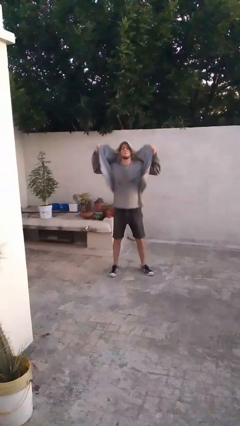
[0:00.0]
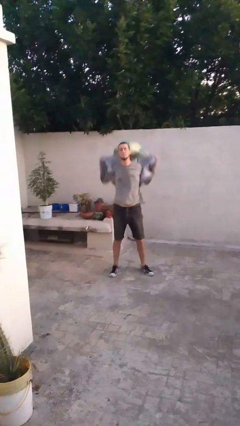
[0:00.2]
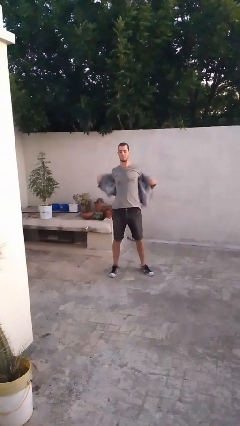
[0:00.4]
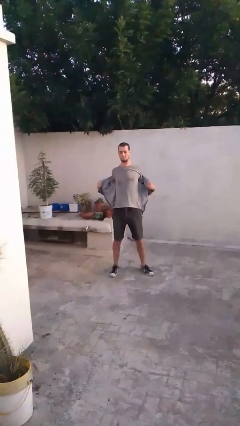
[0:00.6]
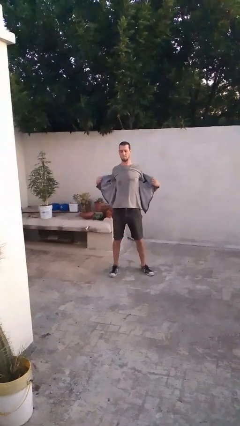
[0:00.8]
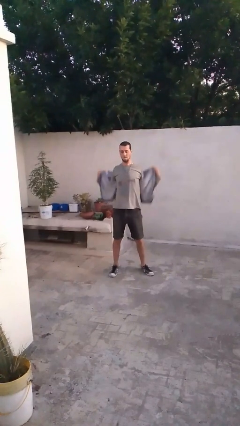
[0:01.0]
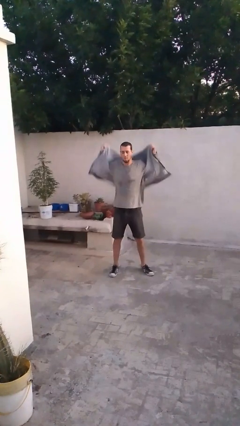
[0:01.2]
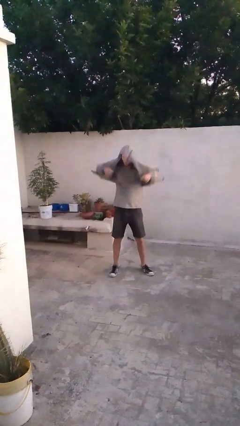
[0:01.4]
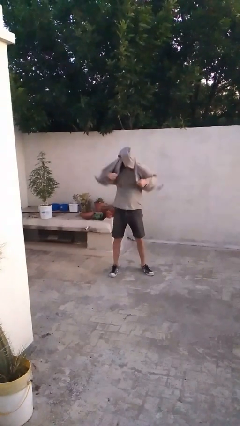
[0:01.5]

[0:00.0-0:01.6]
person takes off hoodie

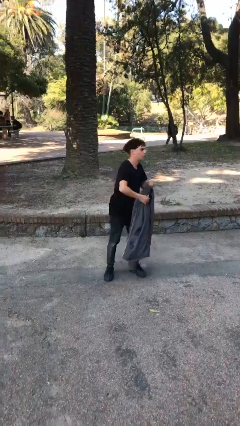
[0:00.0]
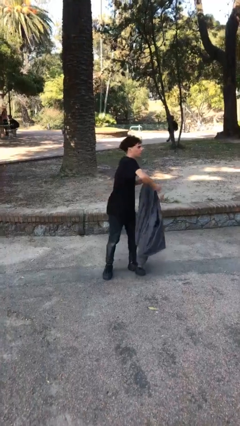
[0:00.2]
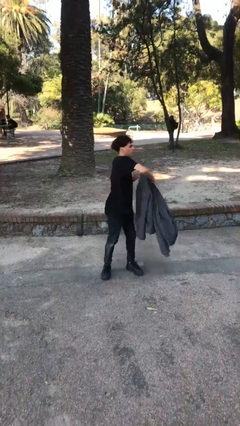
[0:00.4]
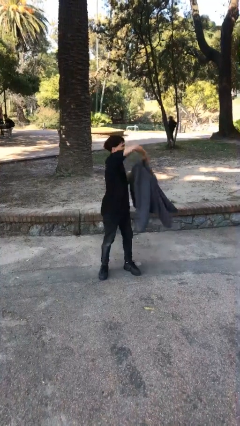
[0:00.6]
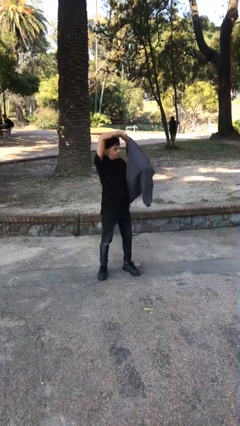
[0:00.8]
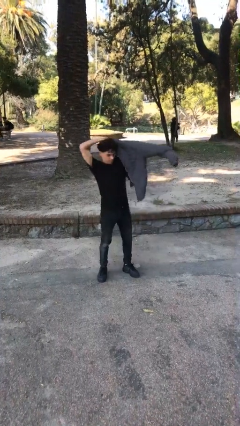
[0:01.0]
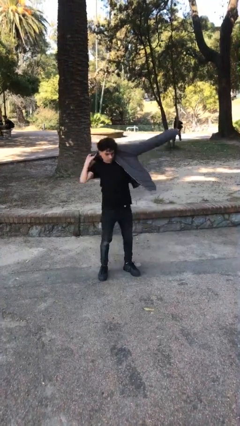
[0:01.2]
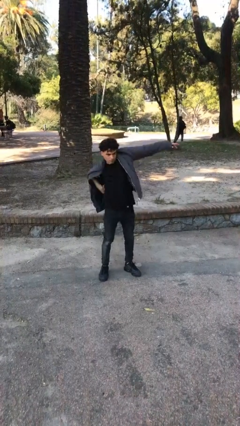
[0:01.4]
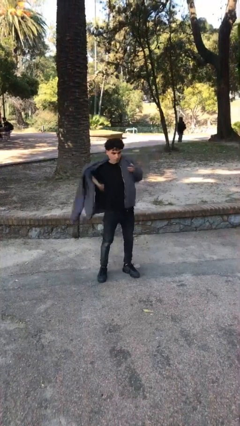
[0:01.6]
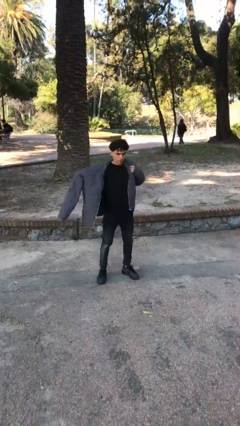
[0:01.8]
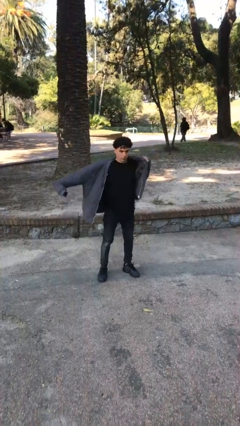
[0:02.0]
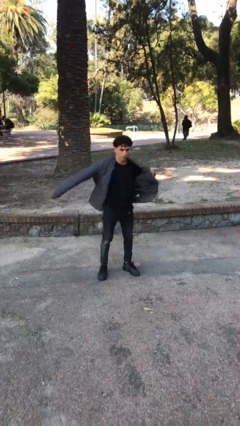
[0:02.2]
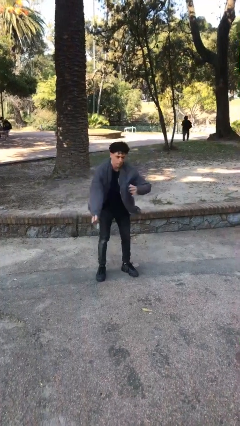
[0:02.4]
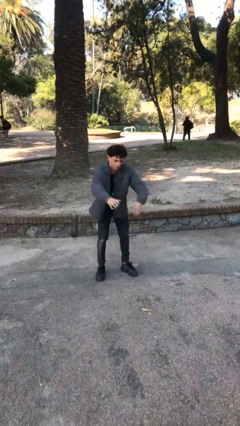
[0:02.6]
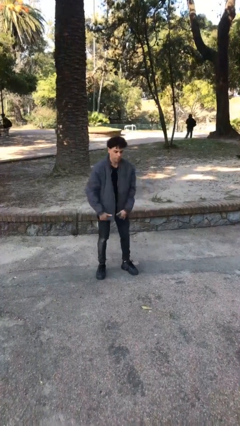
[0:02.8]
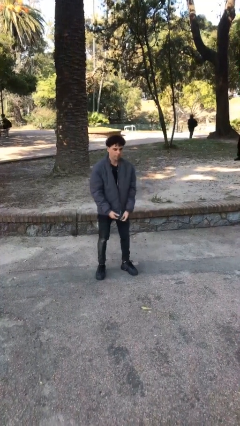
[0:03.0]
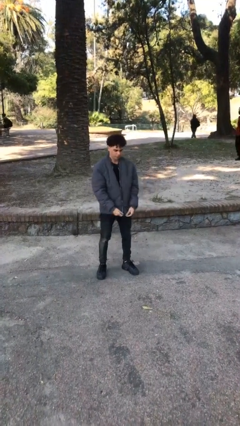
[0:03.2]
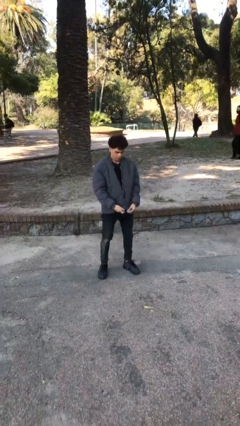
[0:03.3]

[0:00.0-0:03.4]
person puts on jacket

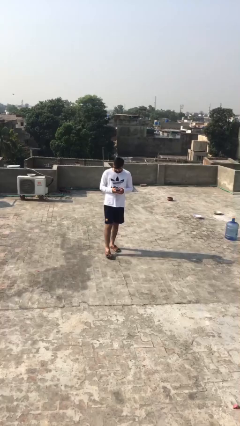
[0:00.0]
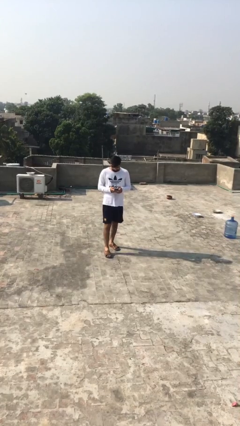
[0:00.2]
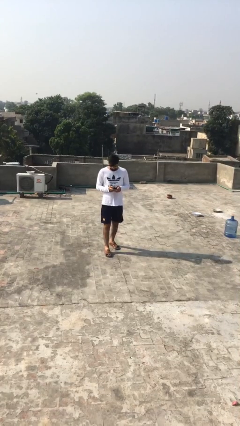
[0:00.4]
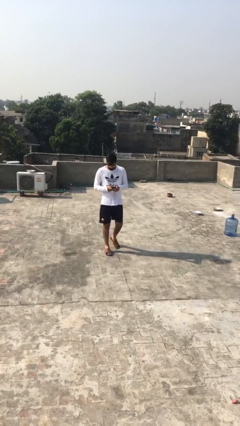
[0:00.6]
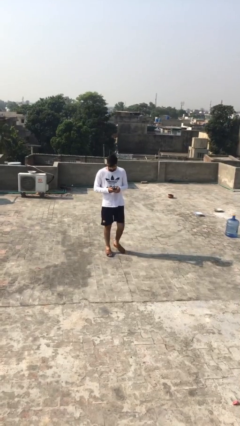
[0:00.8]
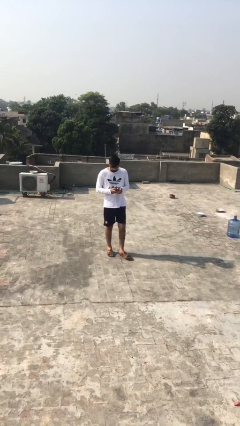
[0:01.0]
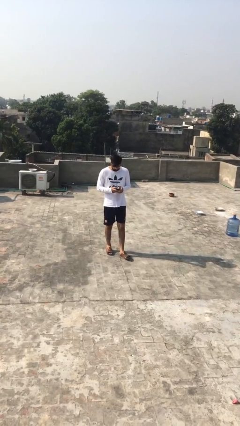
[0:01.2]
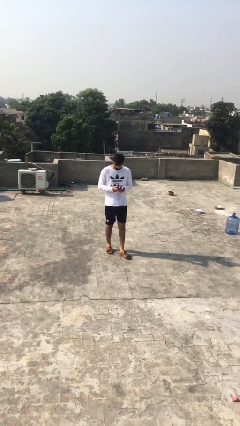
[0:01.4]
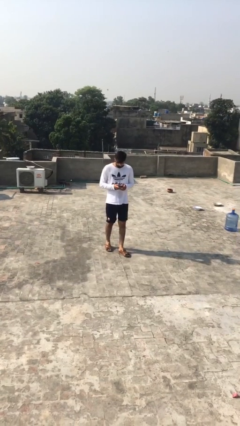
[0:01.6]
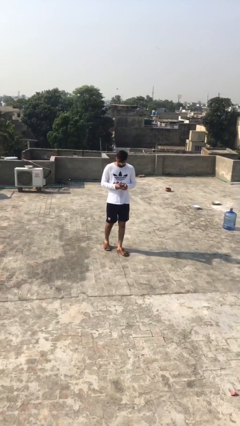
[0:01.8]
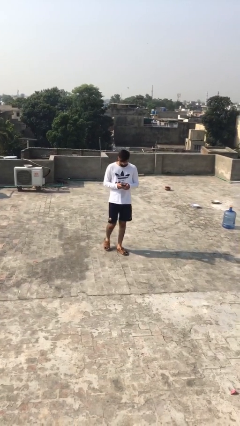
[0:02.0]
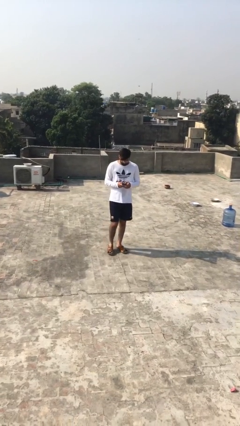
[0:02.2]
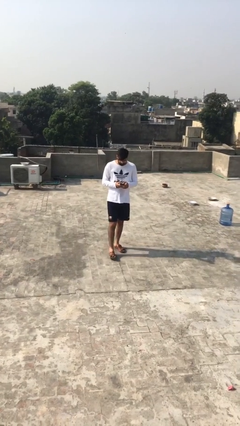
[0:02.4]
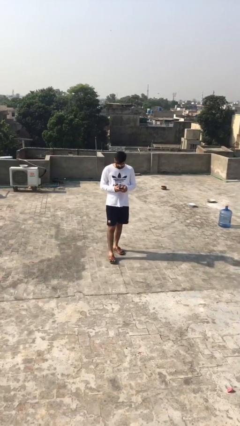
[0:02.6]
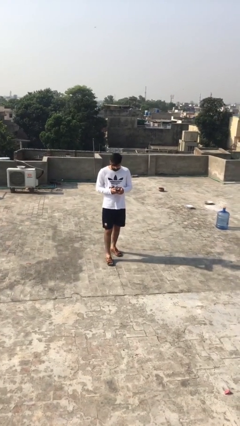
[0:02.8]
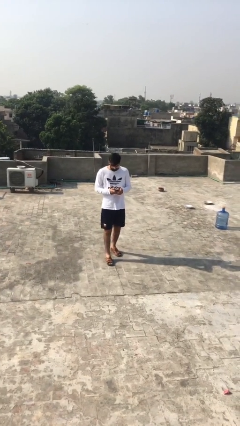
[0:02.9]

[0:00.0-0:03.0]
person texts on phone

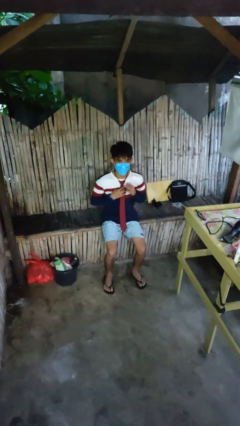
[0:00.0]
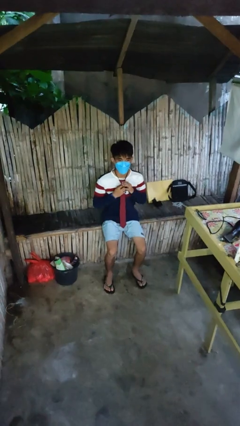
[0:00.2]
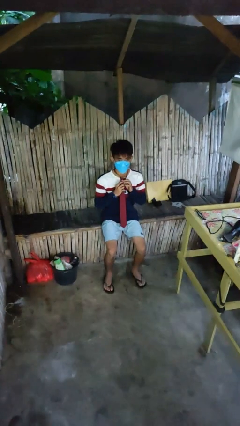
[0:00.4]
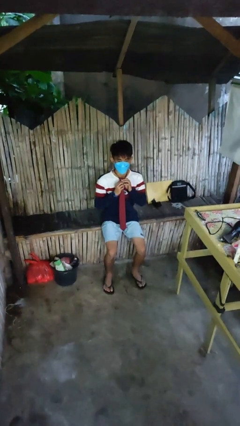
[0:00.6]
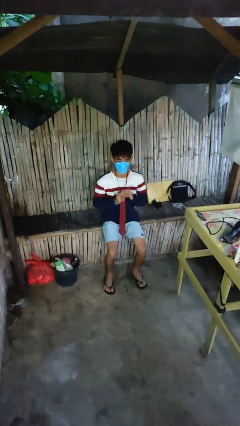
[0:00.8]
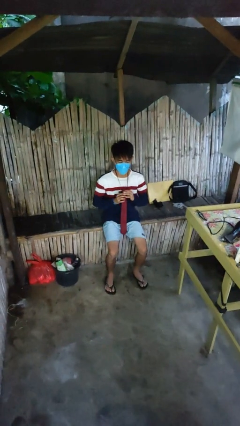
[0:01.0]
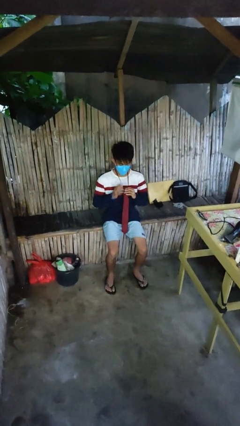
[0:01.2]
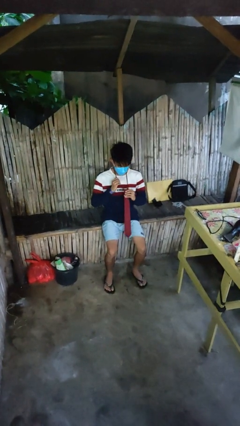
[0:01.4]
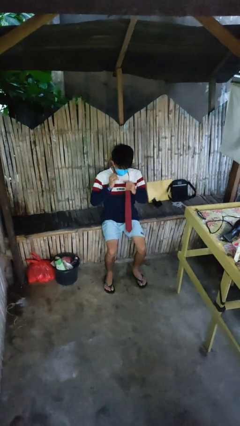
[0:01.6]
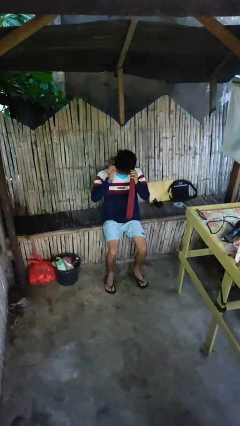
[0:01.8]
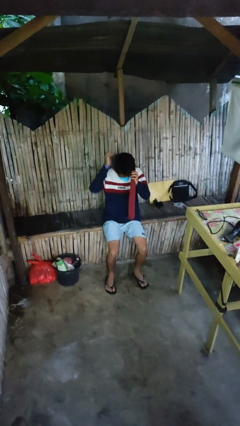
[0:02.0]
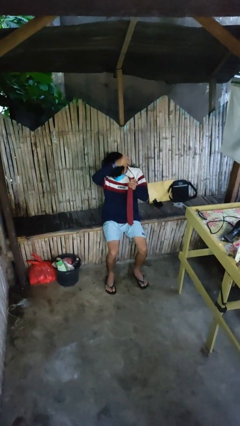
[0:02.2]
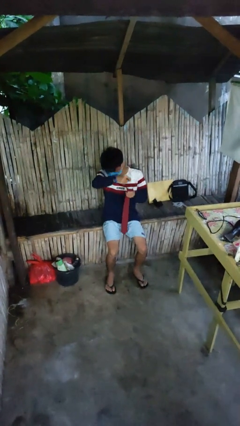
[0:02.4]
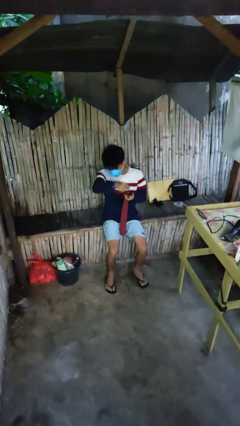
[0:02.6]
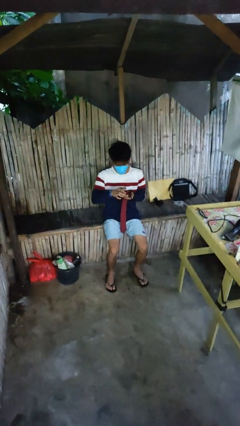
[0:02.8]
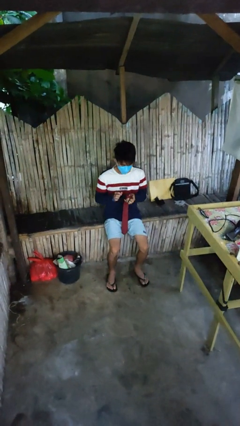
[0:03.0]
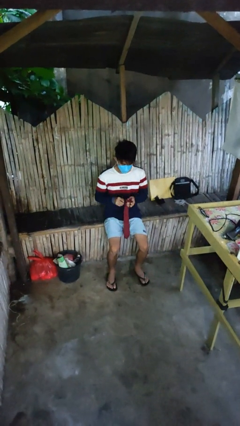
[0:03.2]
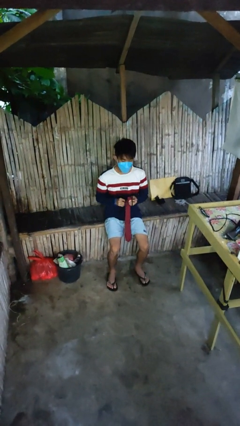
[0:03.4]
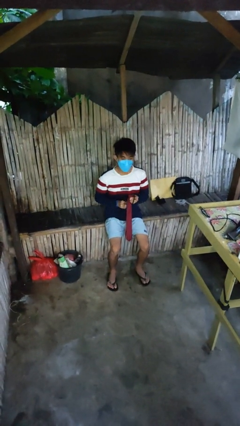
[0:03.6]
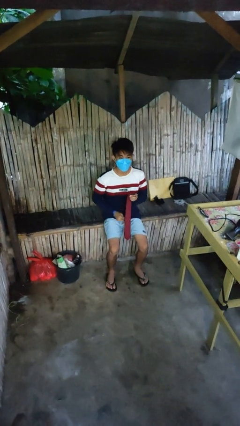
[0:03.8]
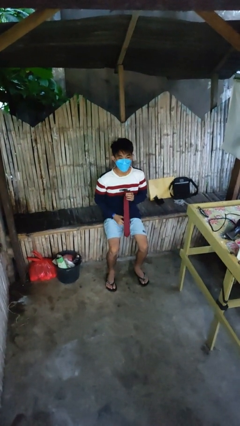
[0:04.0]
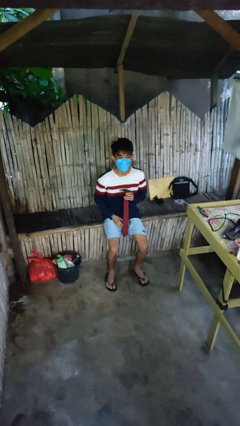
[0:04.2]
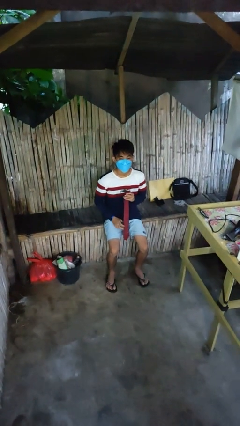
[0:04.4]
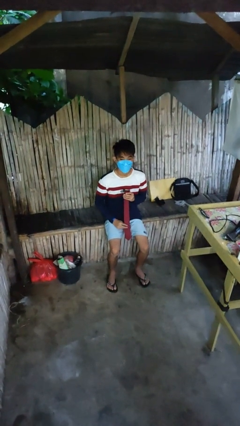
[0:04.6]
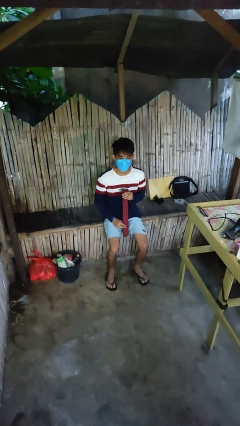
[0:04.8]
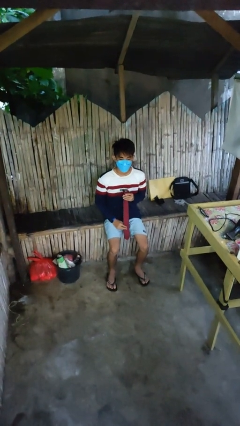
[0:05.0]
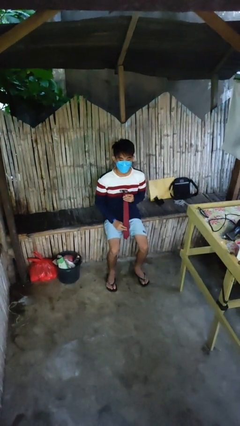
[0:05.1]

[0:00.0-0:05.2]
person takes off necktie

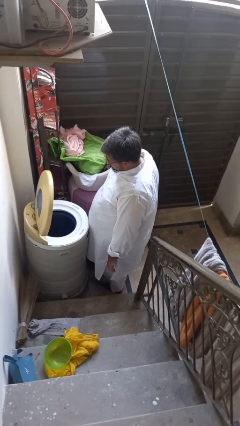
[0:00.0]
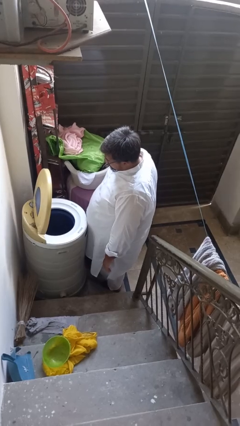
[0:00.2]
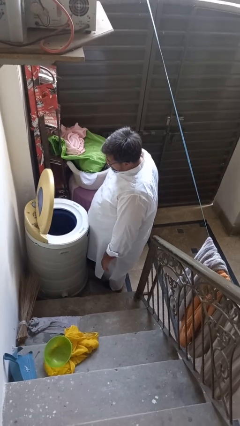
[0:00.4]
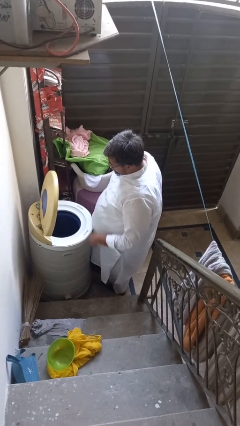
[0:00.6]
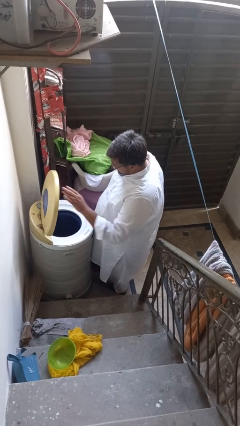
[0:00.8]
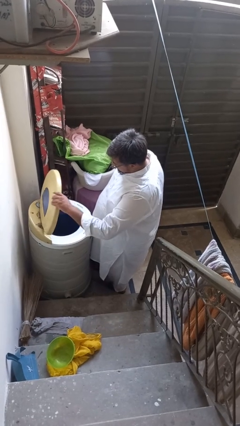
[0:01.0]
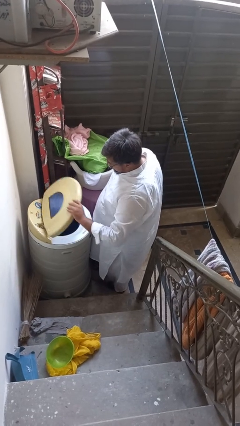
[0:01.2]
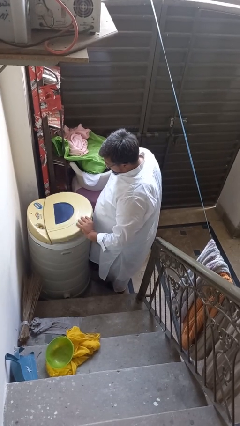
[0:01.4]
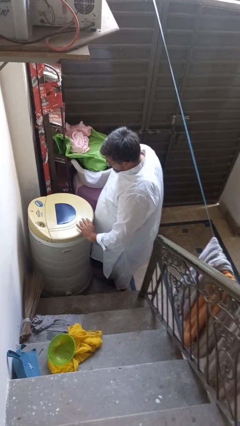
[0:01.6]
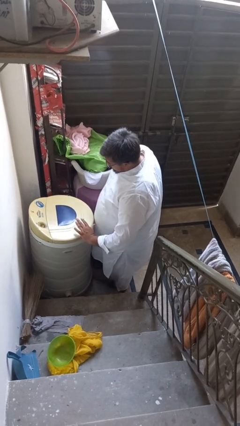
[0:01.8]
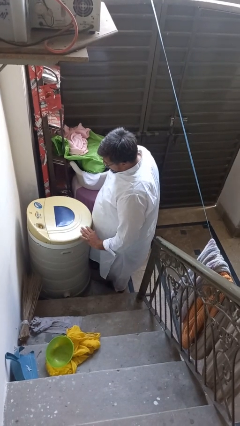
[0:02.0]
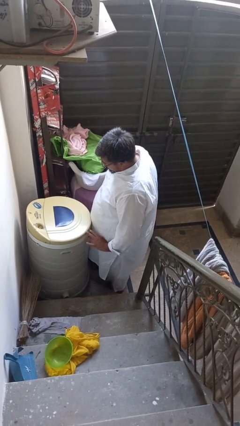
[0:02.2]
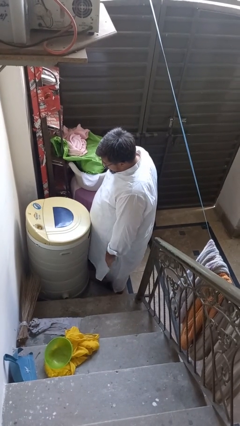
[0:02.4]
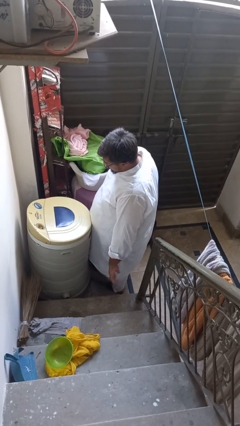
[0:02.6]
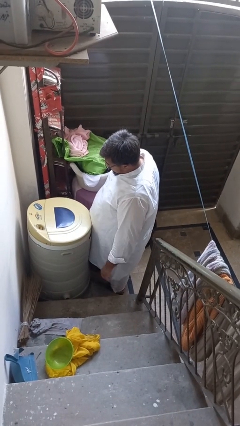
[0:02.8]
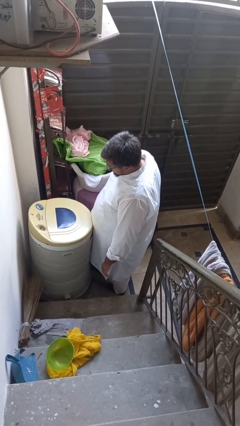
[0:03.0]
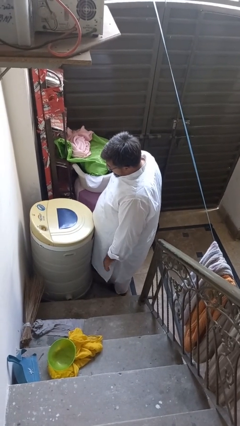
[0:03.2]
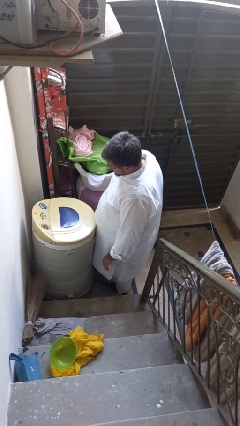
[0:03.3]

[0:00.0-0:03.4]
person closes clothes washer

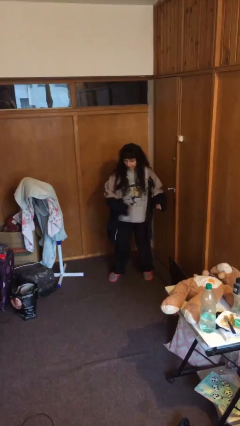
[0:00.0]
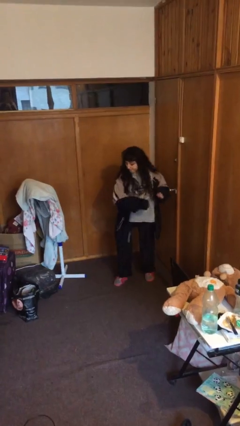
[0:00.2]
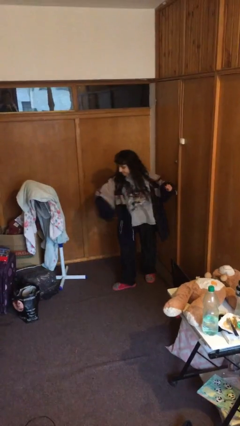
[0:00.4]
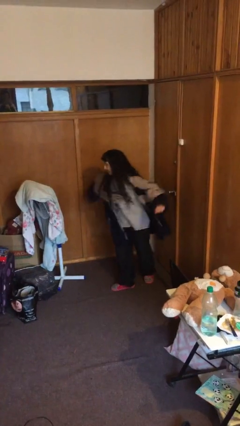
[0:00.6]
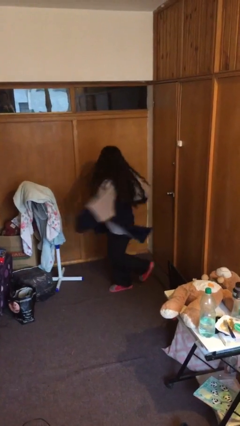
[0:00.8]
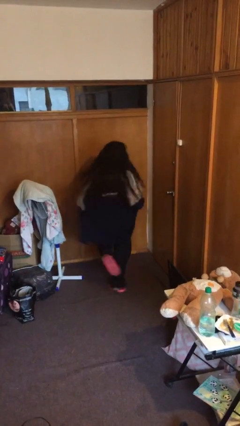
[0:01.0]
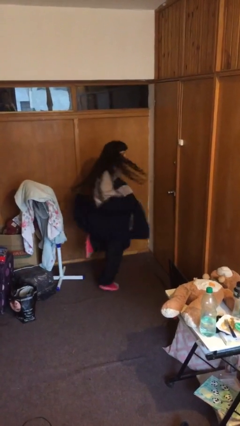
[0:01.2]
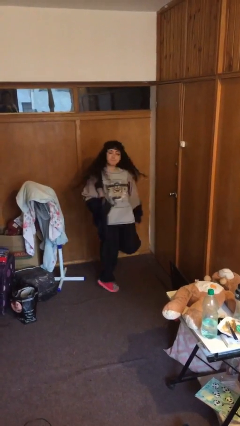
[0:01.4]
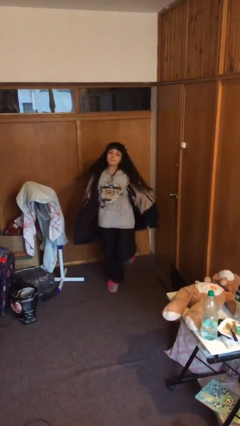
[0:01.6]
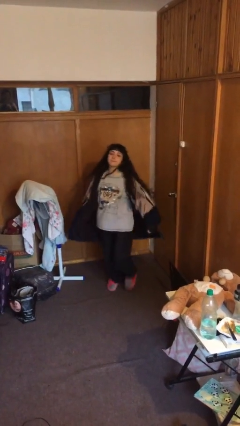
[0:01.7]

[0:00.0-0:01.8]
person twirls
